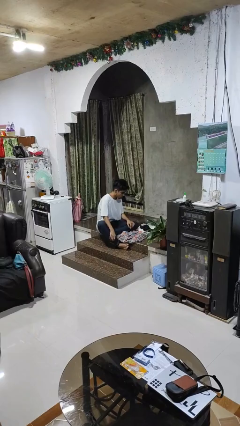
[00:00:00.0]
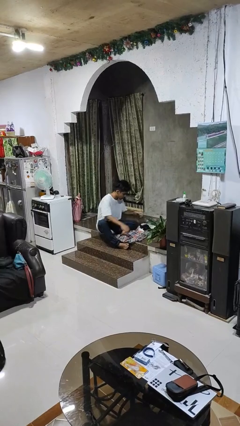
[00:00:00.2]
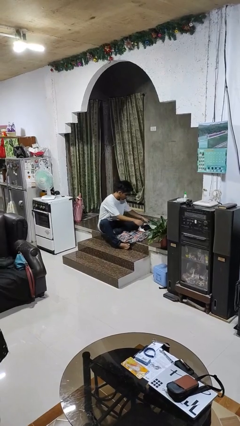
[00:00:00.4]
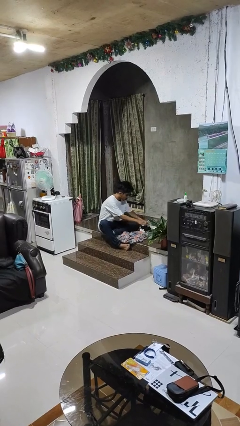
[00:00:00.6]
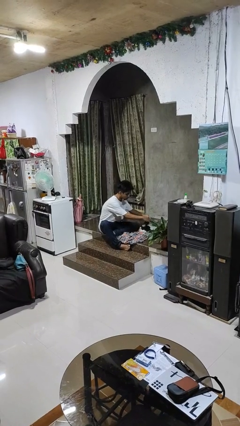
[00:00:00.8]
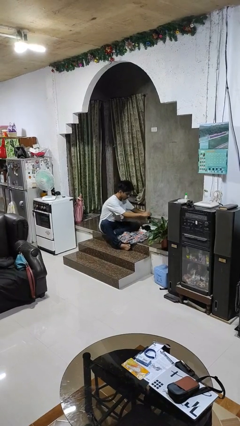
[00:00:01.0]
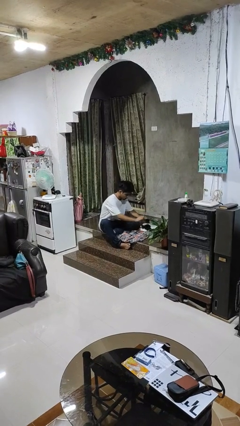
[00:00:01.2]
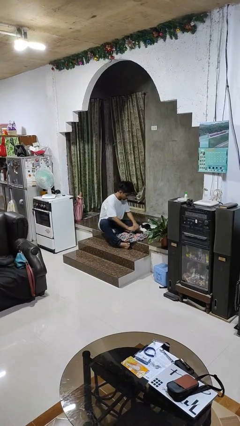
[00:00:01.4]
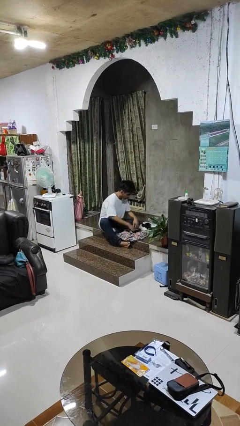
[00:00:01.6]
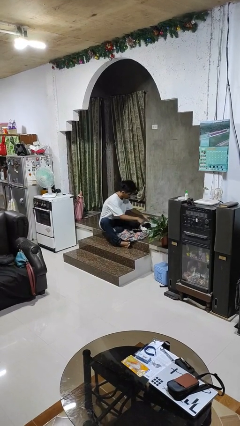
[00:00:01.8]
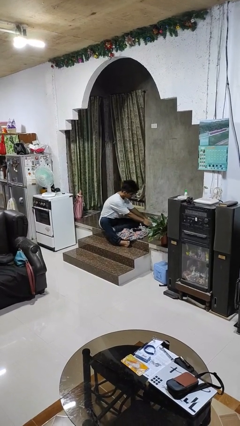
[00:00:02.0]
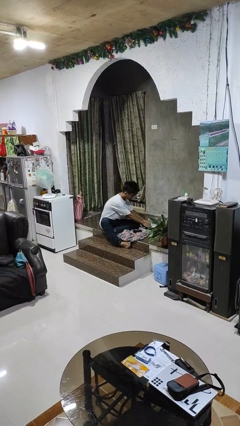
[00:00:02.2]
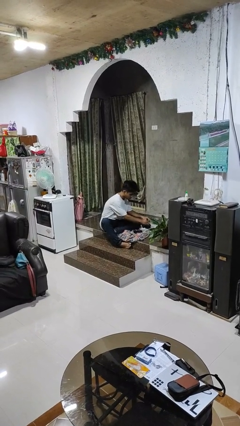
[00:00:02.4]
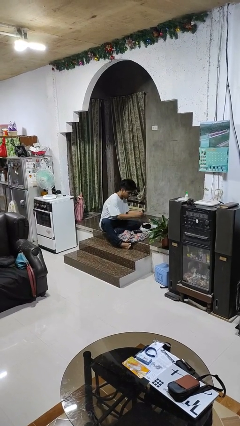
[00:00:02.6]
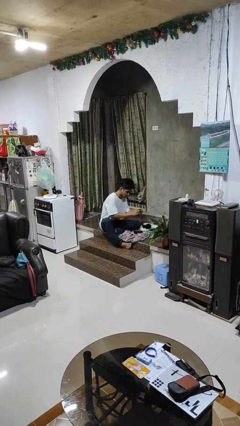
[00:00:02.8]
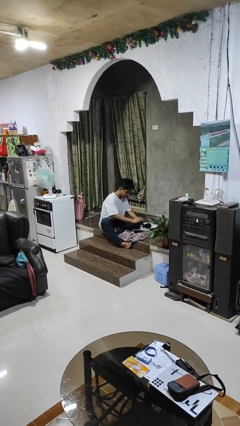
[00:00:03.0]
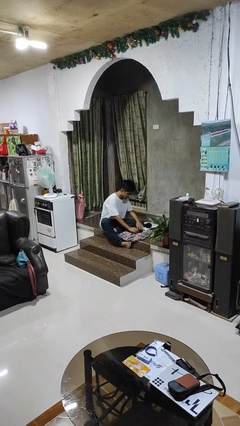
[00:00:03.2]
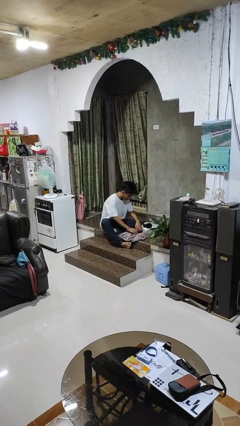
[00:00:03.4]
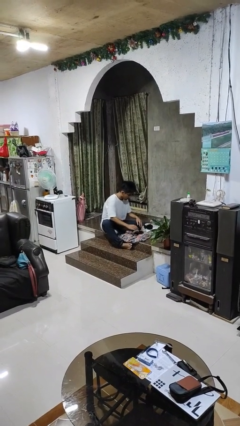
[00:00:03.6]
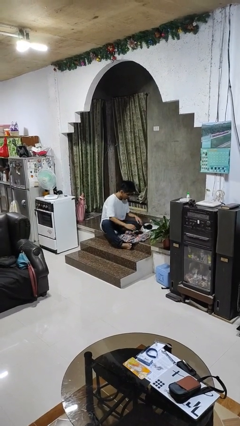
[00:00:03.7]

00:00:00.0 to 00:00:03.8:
person folds socks

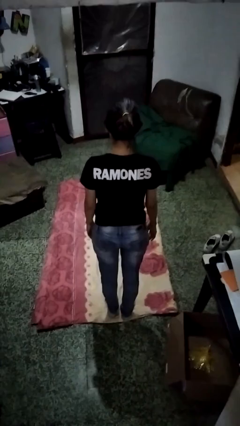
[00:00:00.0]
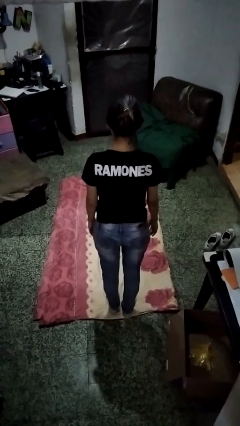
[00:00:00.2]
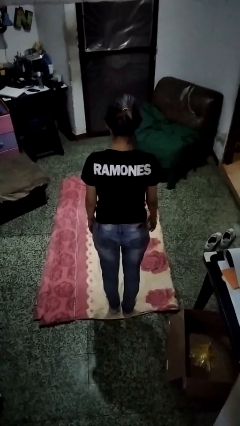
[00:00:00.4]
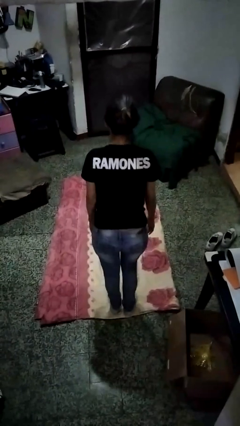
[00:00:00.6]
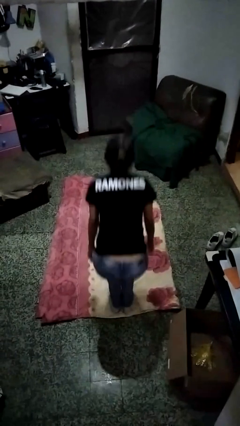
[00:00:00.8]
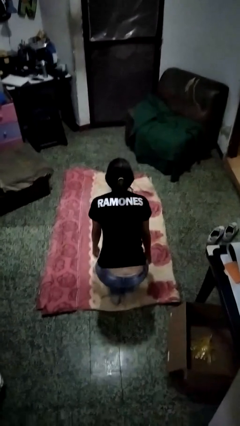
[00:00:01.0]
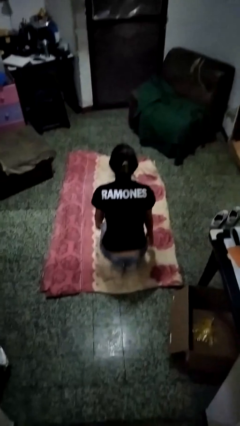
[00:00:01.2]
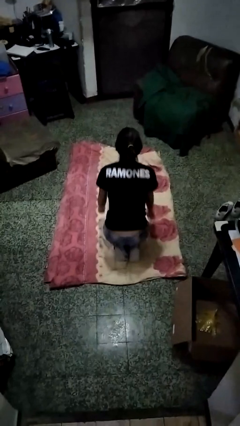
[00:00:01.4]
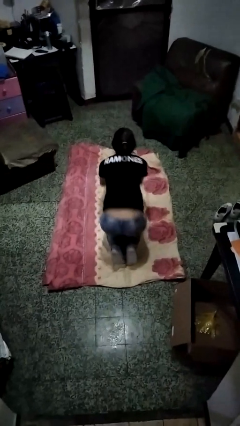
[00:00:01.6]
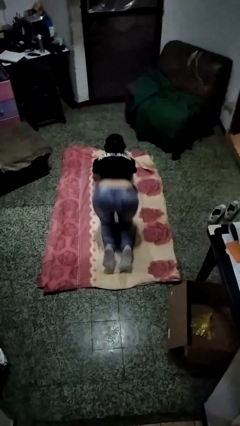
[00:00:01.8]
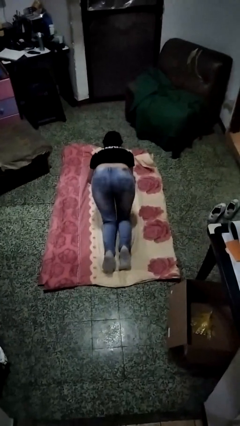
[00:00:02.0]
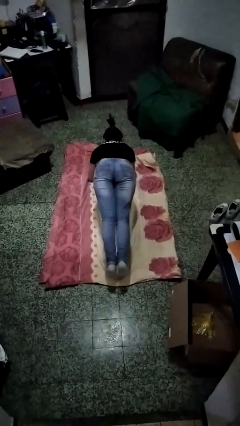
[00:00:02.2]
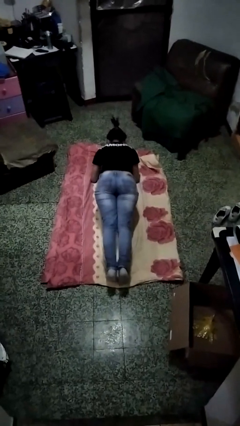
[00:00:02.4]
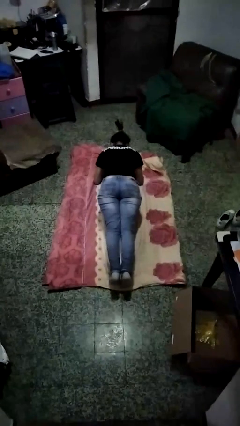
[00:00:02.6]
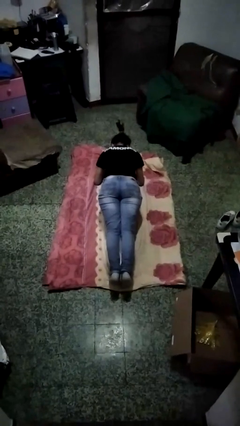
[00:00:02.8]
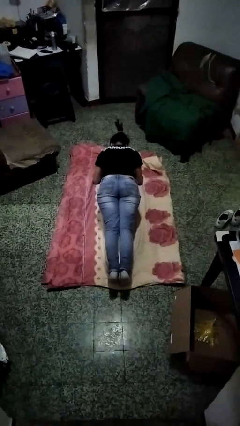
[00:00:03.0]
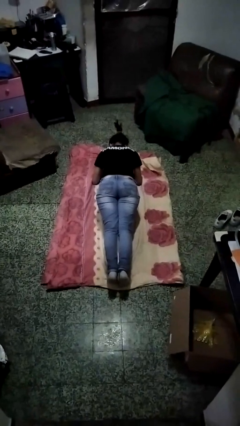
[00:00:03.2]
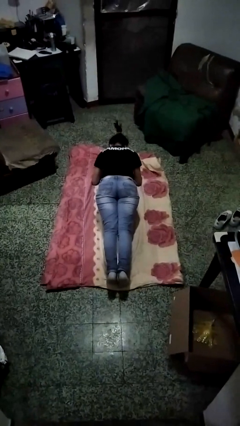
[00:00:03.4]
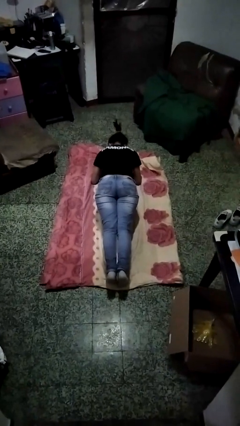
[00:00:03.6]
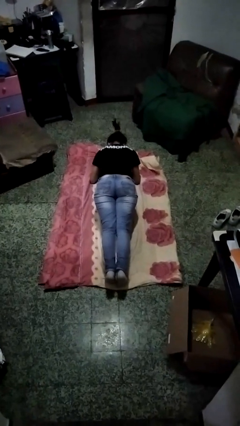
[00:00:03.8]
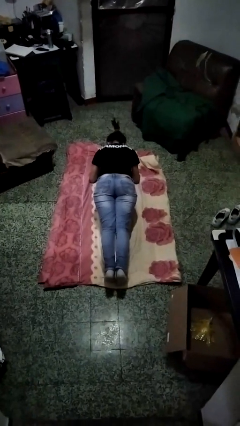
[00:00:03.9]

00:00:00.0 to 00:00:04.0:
person exercises with plank

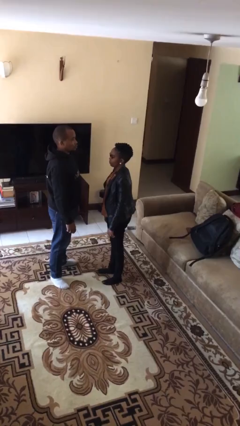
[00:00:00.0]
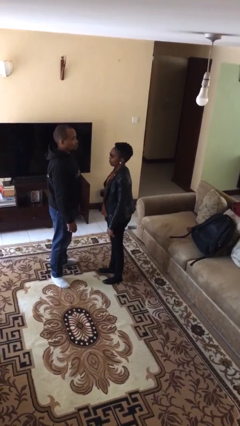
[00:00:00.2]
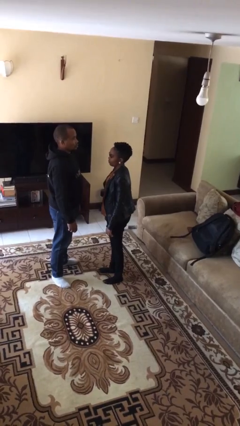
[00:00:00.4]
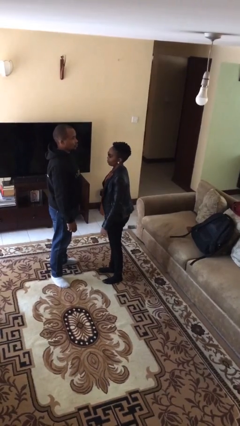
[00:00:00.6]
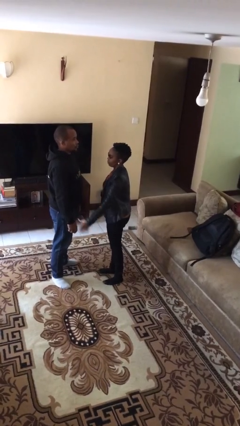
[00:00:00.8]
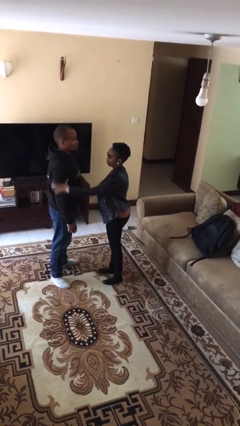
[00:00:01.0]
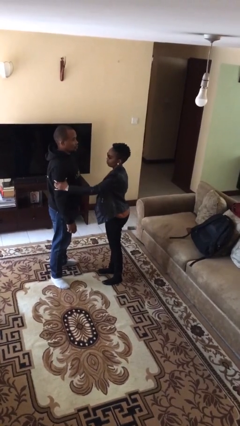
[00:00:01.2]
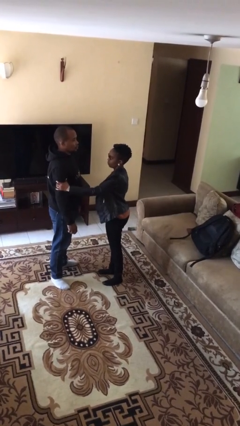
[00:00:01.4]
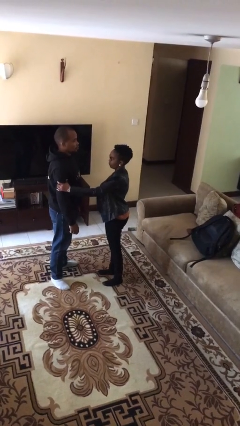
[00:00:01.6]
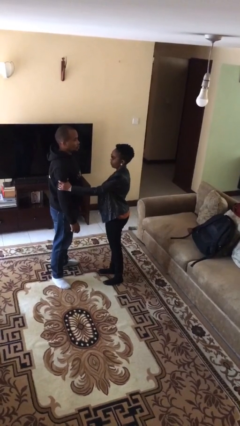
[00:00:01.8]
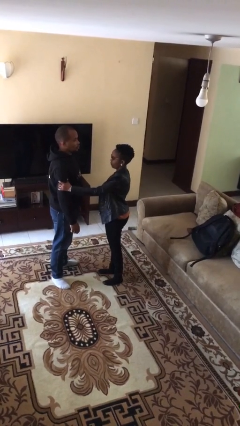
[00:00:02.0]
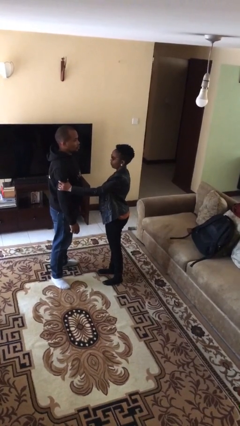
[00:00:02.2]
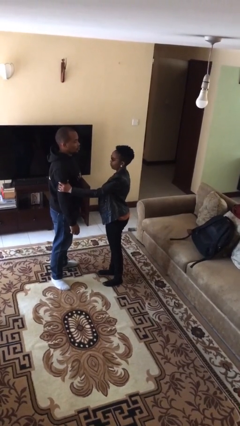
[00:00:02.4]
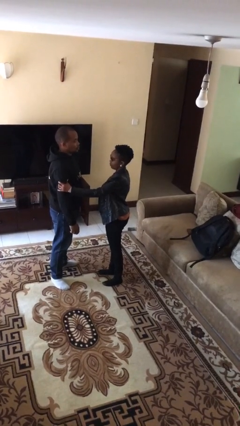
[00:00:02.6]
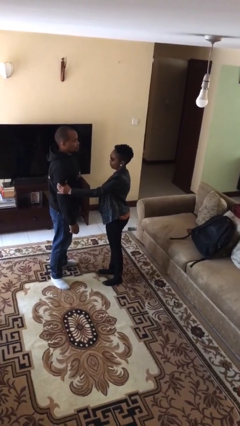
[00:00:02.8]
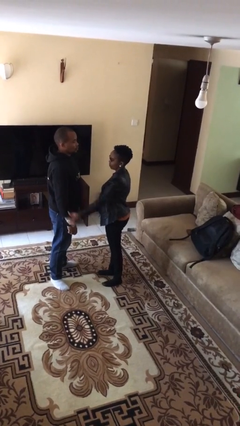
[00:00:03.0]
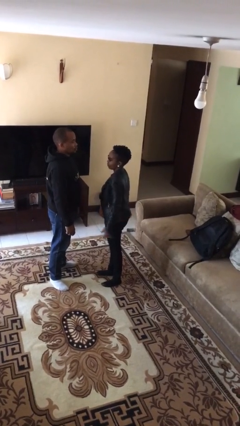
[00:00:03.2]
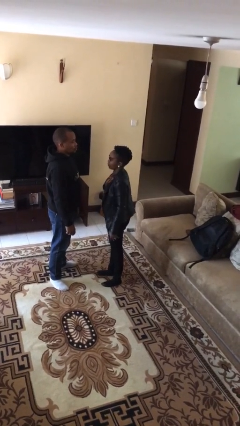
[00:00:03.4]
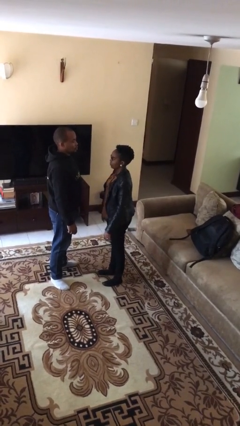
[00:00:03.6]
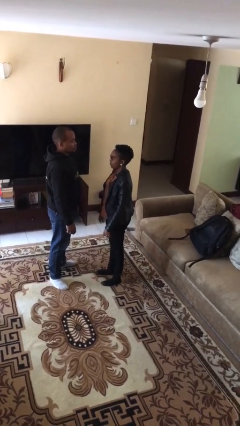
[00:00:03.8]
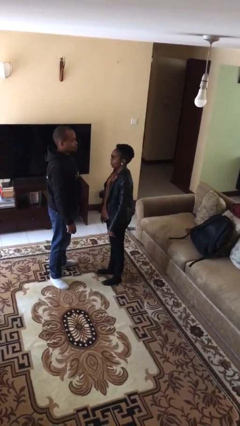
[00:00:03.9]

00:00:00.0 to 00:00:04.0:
person grabs person by bicep

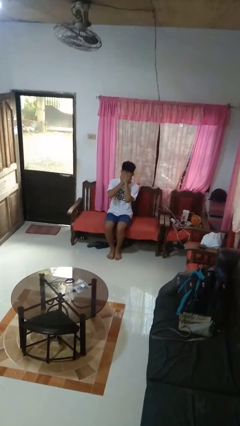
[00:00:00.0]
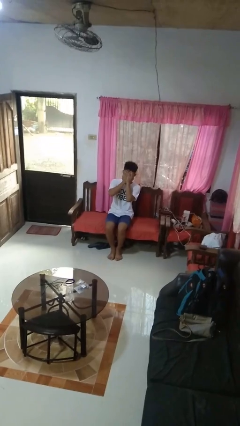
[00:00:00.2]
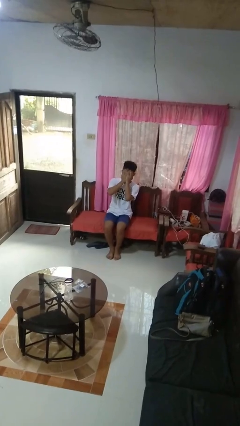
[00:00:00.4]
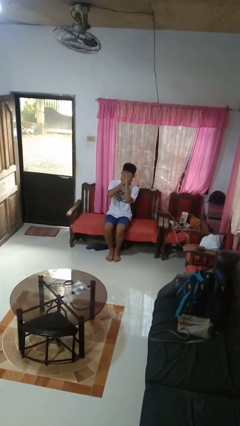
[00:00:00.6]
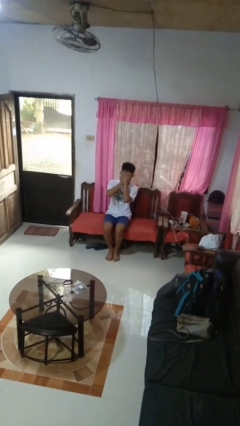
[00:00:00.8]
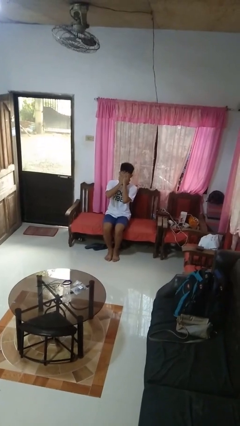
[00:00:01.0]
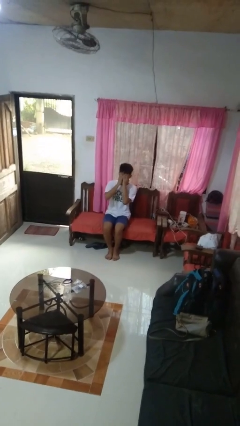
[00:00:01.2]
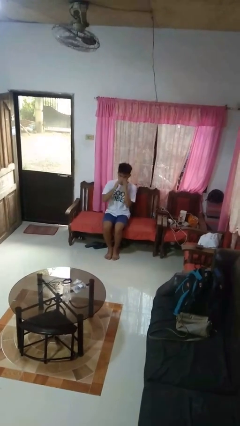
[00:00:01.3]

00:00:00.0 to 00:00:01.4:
person covers face with hands

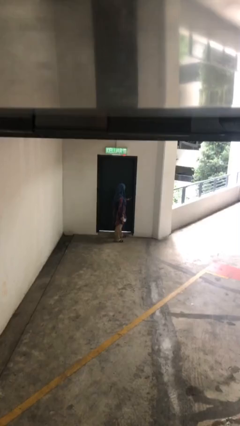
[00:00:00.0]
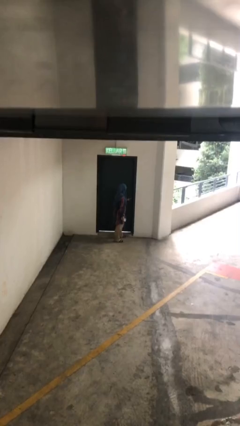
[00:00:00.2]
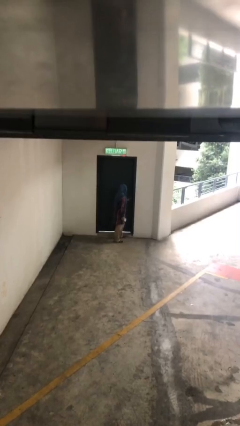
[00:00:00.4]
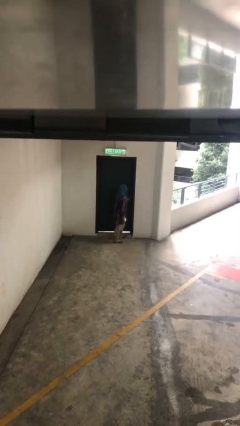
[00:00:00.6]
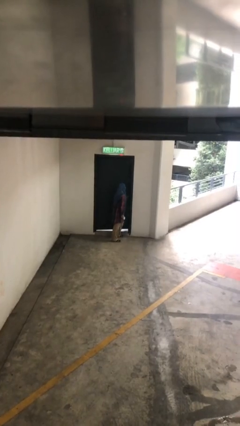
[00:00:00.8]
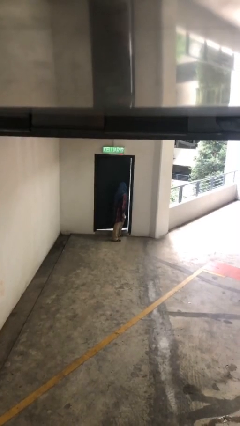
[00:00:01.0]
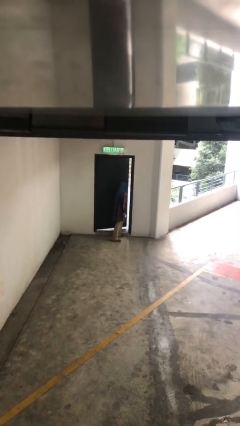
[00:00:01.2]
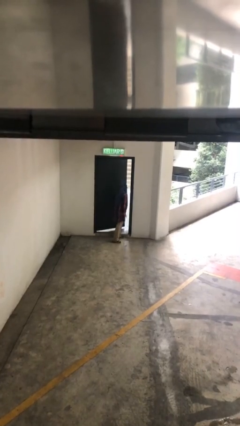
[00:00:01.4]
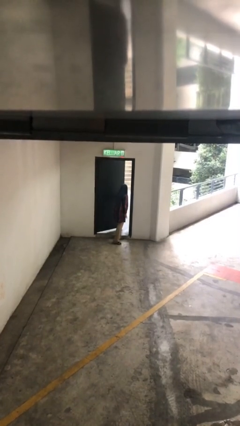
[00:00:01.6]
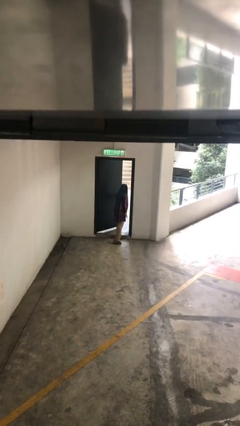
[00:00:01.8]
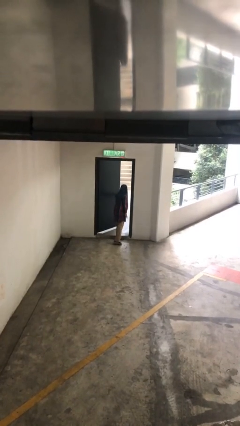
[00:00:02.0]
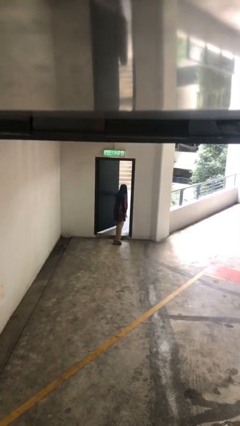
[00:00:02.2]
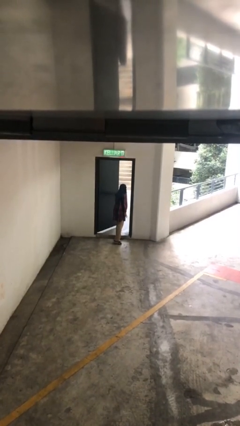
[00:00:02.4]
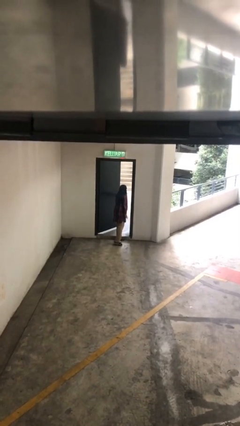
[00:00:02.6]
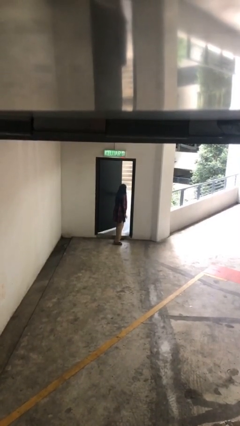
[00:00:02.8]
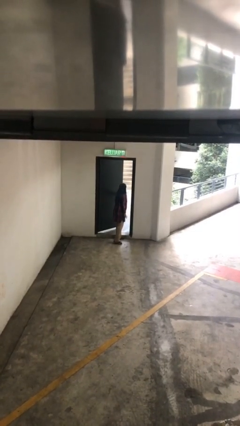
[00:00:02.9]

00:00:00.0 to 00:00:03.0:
person opens facility door

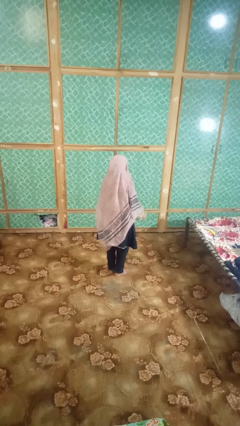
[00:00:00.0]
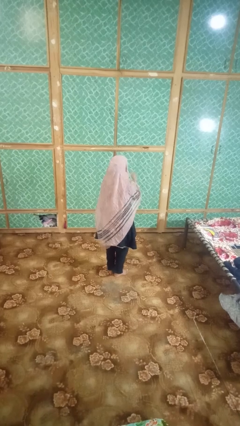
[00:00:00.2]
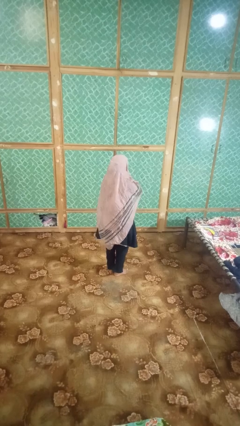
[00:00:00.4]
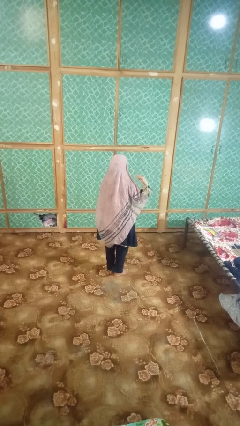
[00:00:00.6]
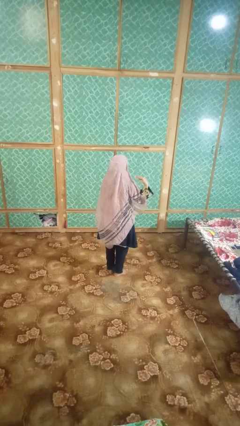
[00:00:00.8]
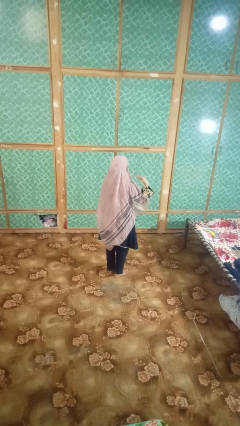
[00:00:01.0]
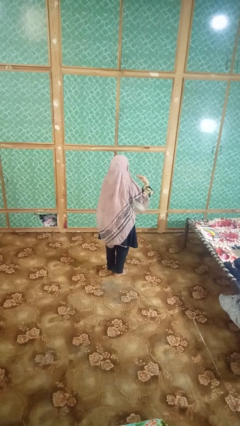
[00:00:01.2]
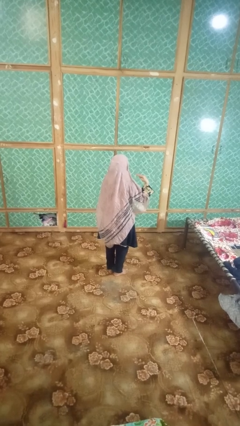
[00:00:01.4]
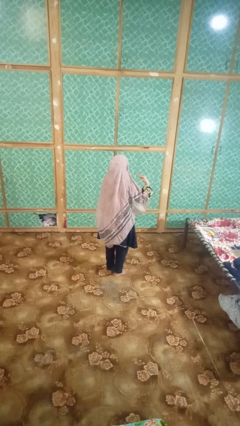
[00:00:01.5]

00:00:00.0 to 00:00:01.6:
person gestures cut
